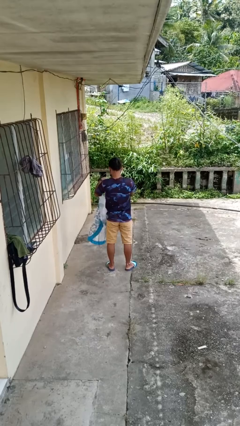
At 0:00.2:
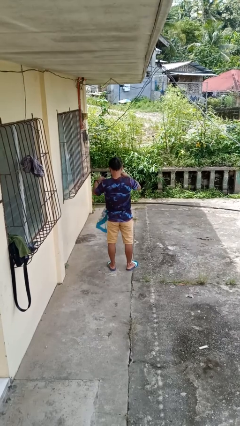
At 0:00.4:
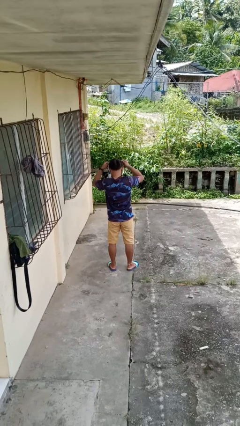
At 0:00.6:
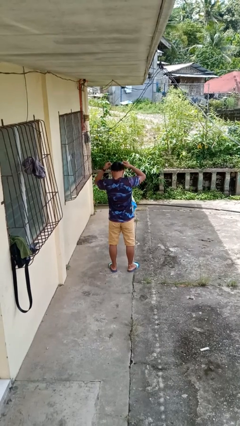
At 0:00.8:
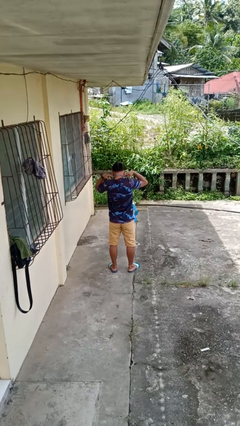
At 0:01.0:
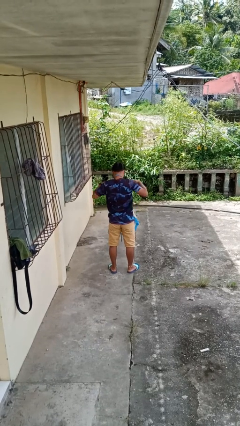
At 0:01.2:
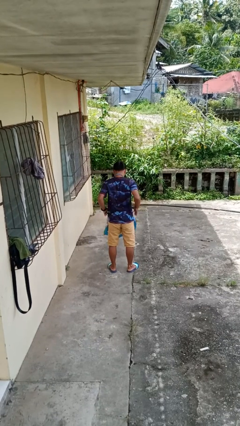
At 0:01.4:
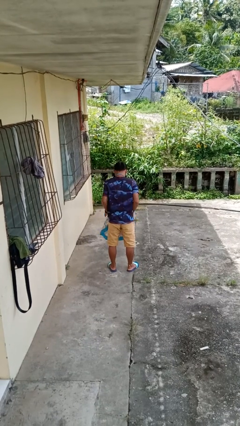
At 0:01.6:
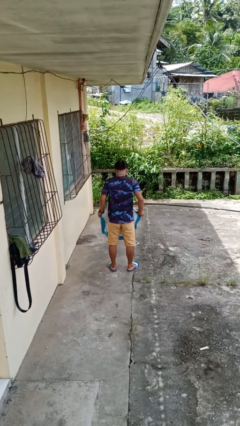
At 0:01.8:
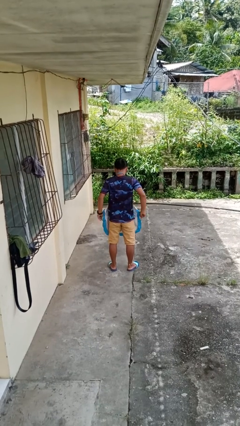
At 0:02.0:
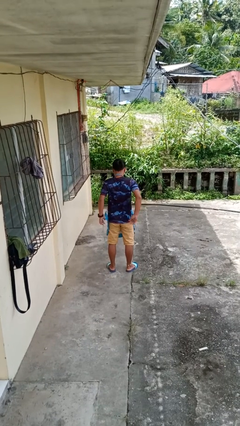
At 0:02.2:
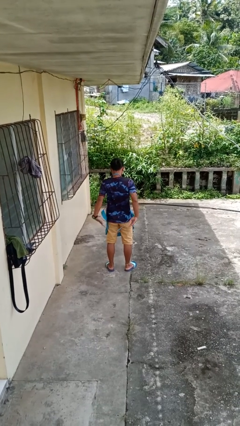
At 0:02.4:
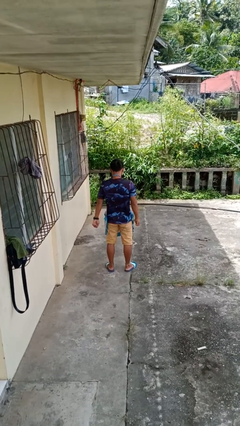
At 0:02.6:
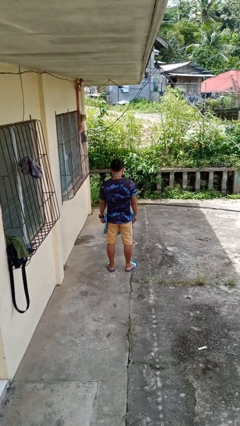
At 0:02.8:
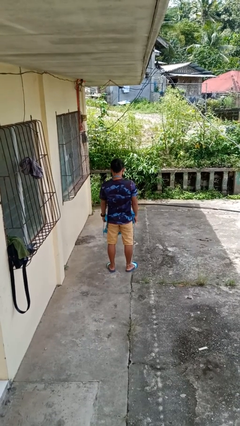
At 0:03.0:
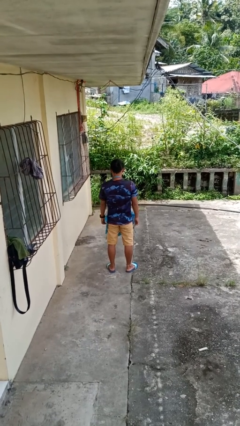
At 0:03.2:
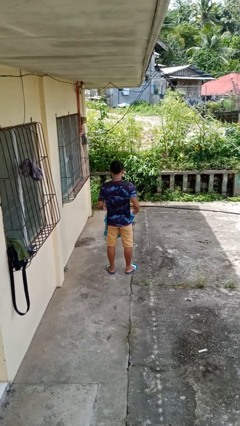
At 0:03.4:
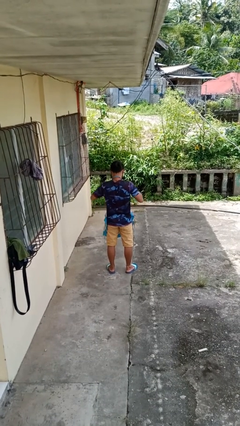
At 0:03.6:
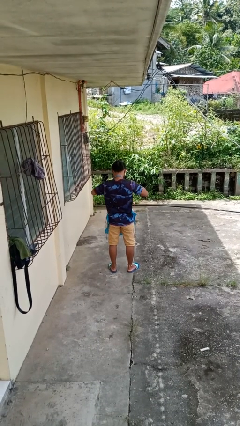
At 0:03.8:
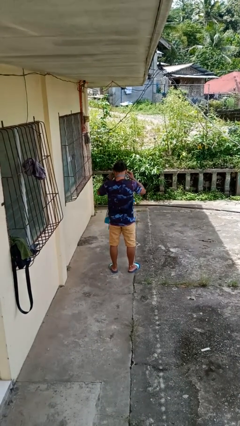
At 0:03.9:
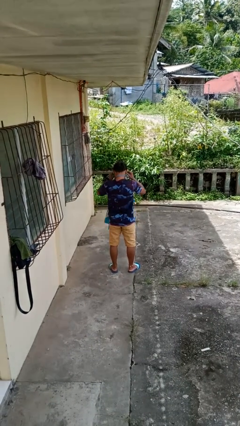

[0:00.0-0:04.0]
person puts on apron

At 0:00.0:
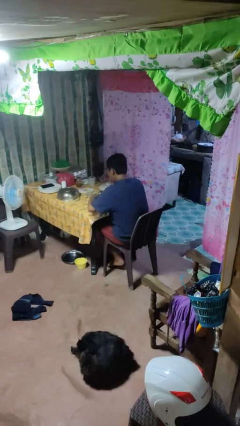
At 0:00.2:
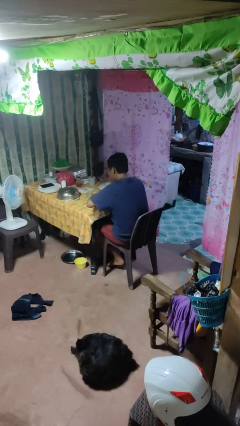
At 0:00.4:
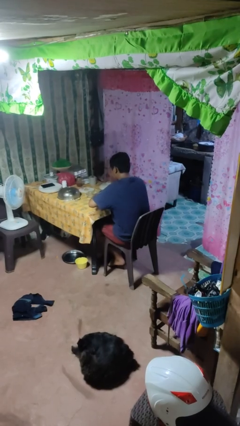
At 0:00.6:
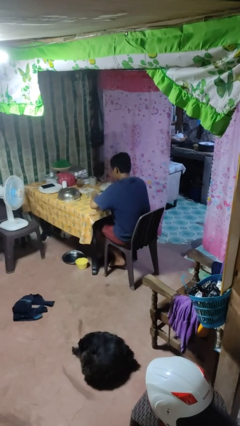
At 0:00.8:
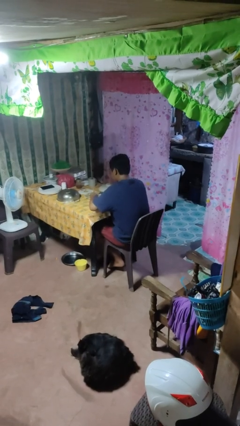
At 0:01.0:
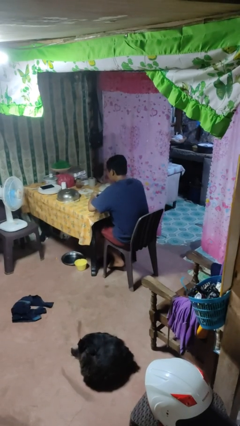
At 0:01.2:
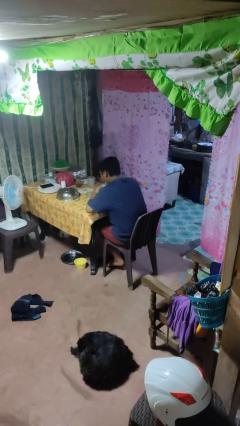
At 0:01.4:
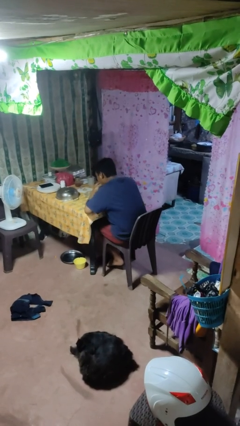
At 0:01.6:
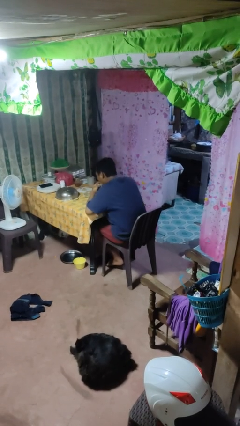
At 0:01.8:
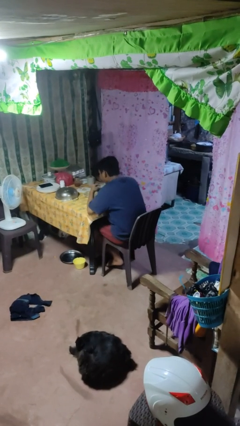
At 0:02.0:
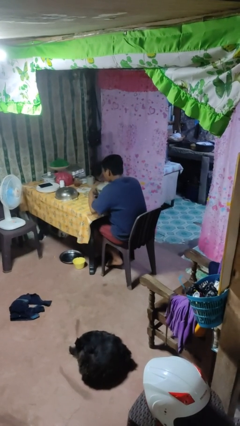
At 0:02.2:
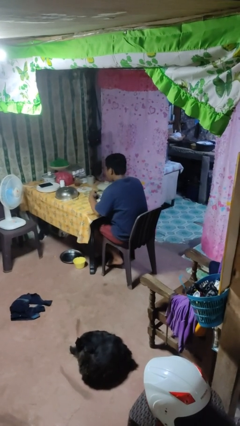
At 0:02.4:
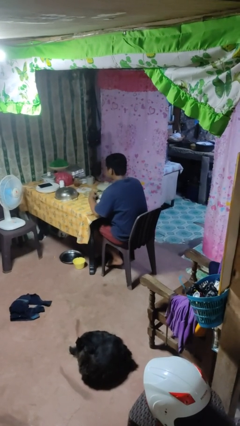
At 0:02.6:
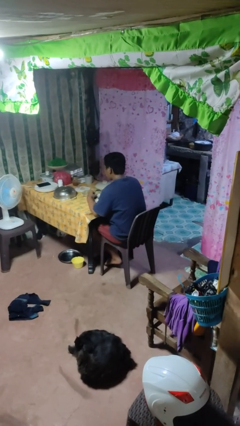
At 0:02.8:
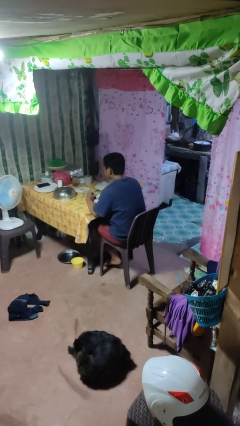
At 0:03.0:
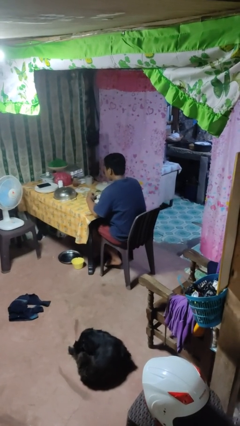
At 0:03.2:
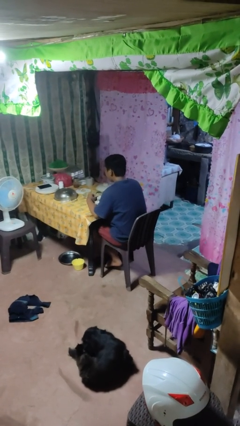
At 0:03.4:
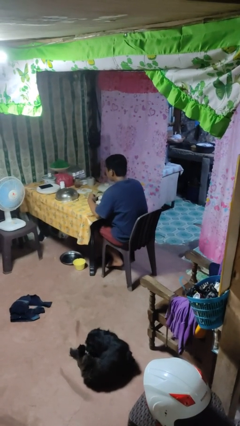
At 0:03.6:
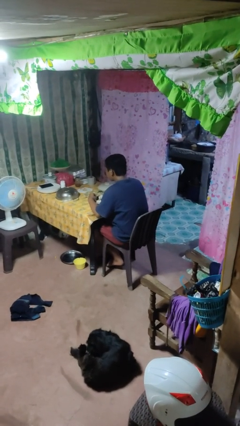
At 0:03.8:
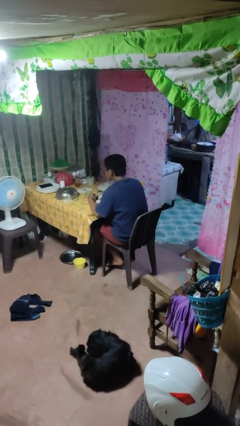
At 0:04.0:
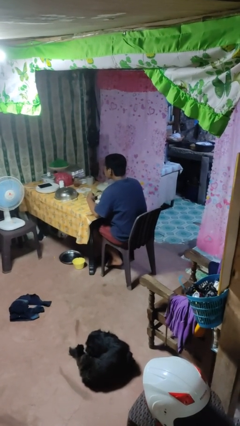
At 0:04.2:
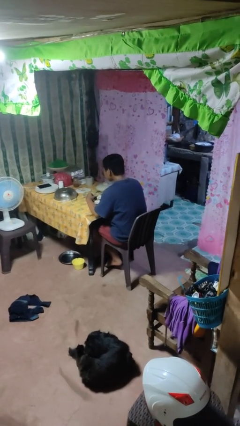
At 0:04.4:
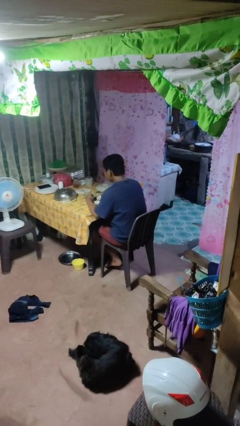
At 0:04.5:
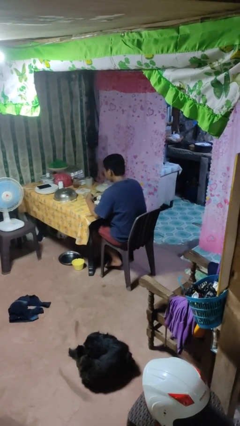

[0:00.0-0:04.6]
person eats with hands

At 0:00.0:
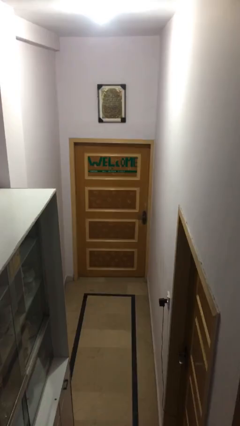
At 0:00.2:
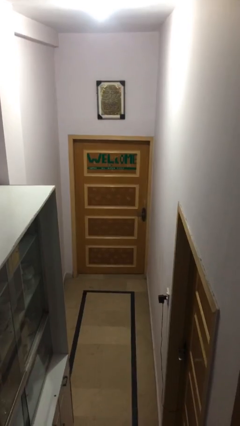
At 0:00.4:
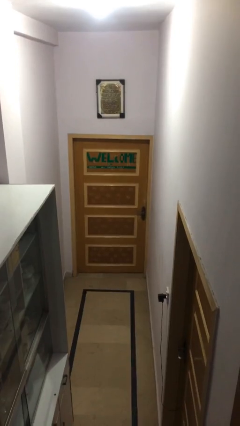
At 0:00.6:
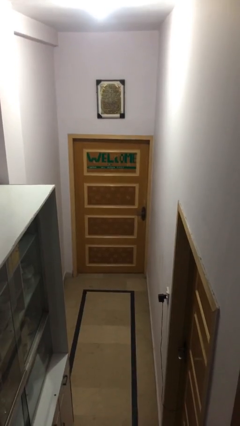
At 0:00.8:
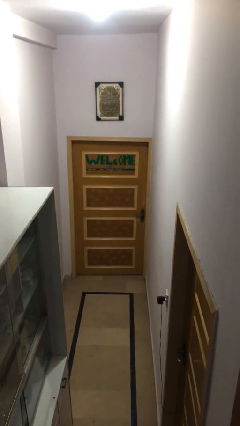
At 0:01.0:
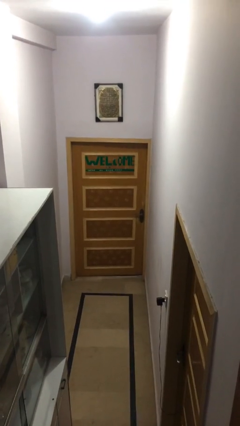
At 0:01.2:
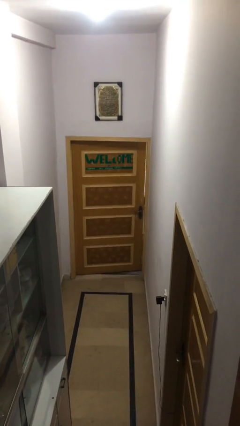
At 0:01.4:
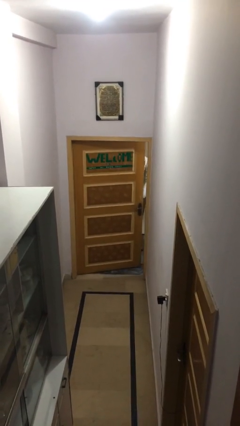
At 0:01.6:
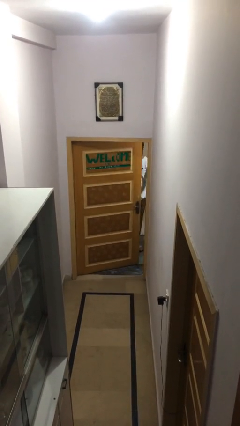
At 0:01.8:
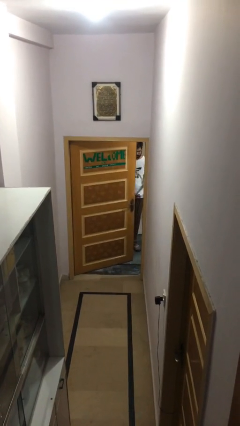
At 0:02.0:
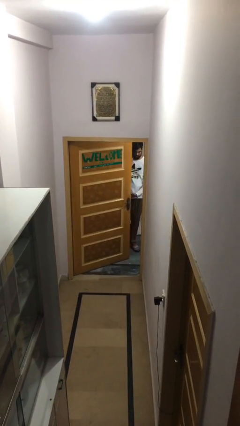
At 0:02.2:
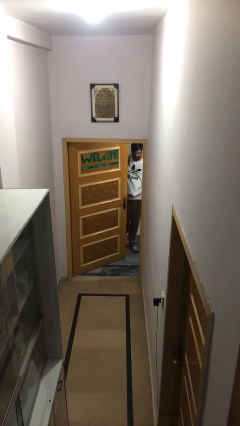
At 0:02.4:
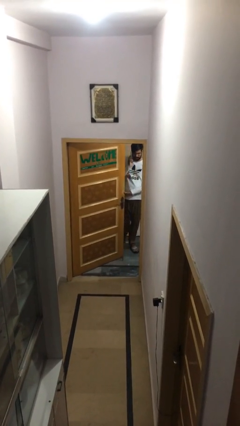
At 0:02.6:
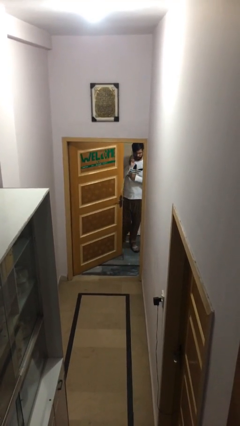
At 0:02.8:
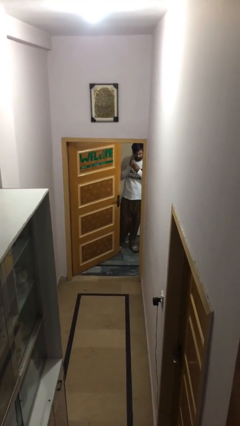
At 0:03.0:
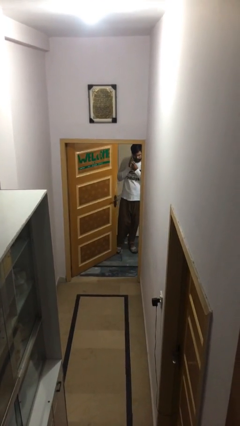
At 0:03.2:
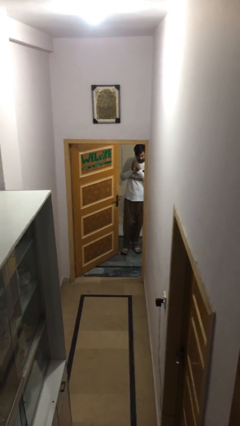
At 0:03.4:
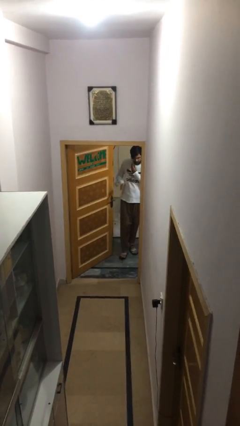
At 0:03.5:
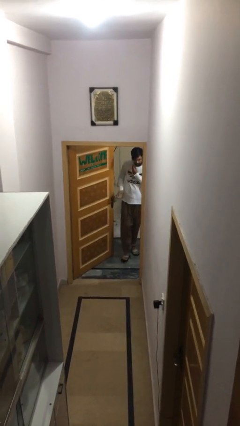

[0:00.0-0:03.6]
person opens facility door

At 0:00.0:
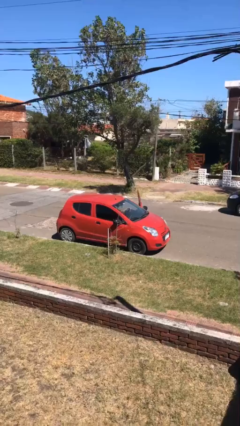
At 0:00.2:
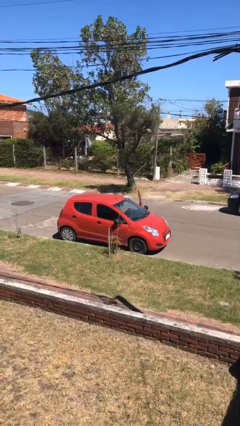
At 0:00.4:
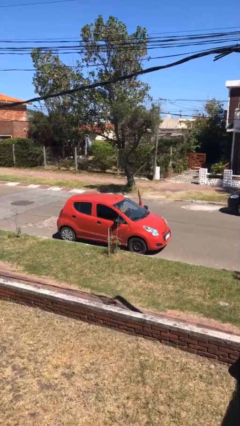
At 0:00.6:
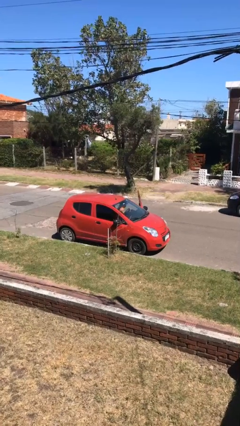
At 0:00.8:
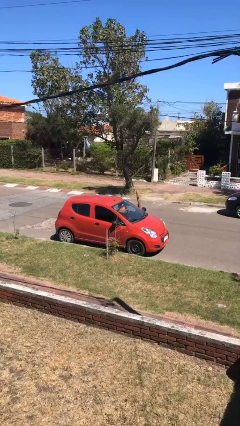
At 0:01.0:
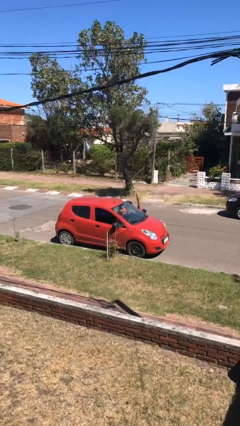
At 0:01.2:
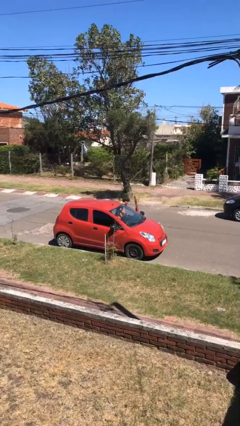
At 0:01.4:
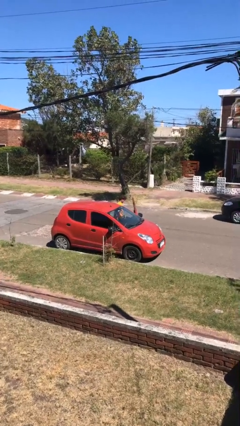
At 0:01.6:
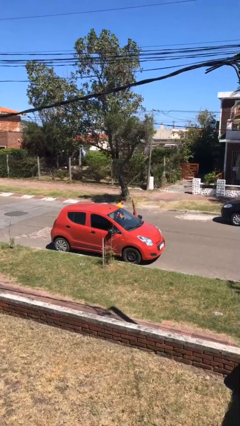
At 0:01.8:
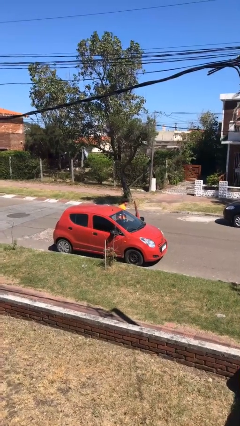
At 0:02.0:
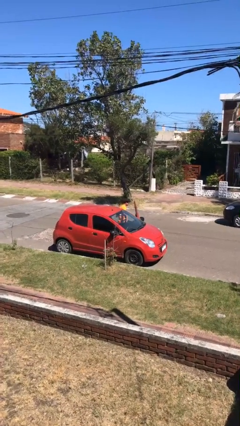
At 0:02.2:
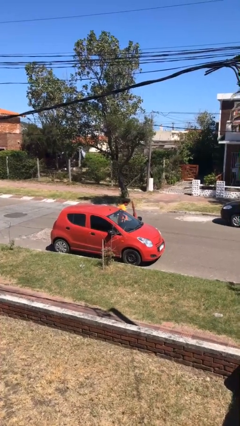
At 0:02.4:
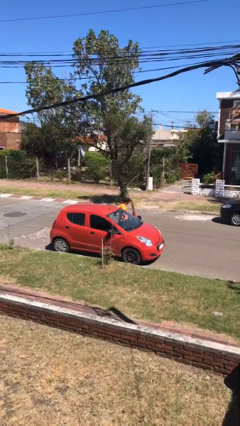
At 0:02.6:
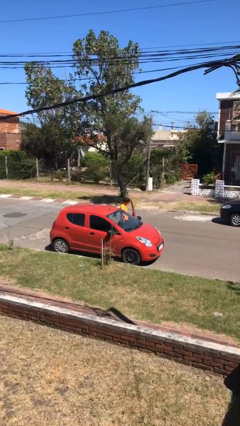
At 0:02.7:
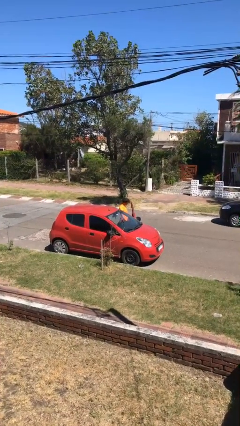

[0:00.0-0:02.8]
person exits car

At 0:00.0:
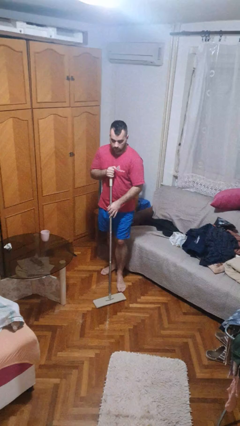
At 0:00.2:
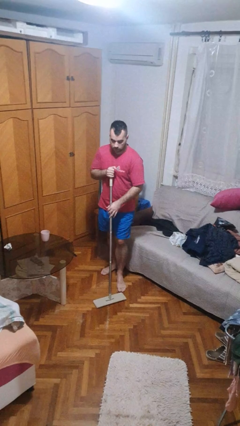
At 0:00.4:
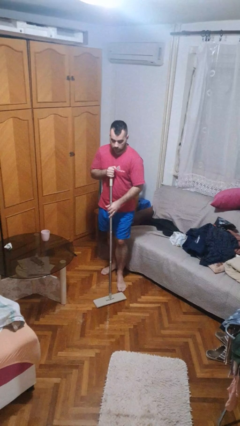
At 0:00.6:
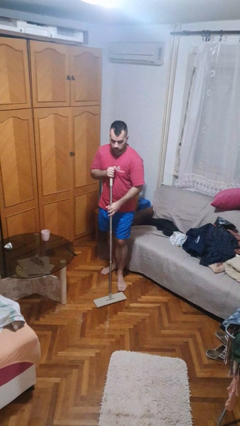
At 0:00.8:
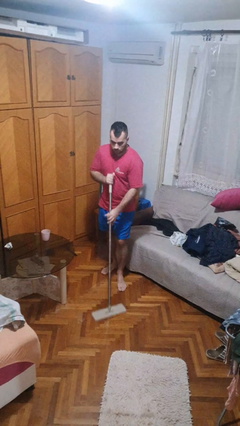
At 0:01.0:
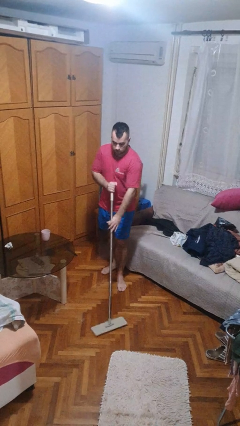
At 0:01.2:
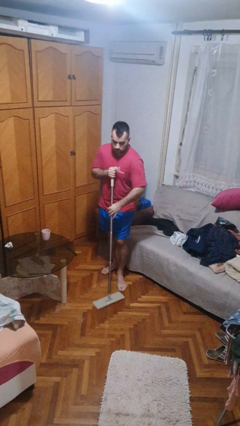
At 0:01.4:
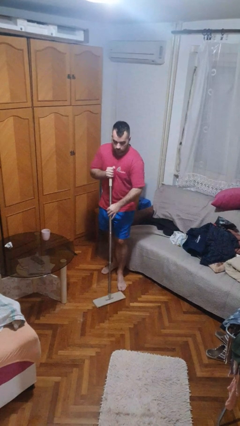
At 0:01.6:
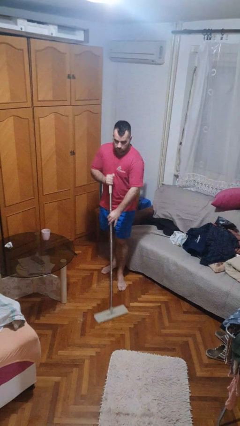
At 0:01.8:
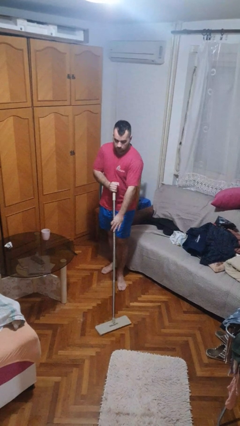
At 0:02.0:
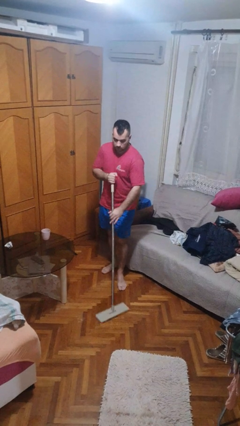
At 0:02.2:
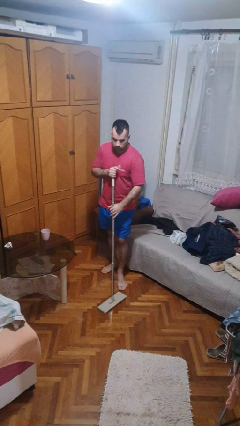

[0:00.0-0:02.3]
person mops

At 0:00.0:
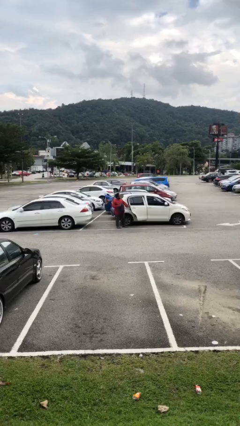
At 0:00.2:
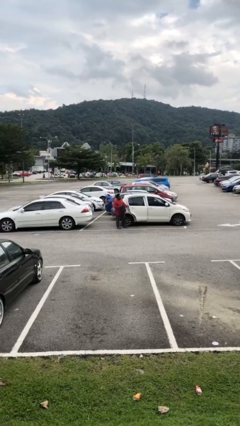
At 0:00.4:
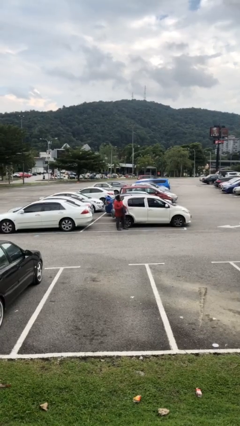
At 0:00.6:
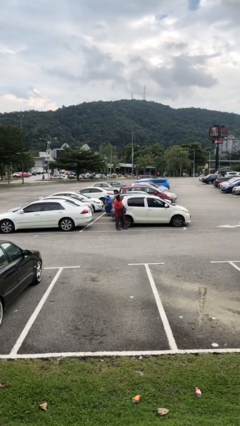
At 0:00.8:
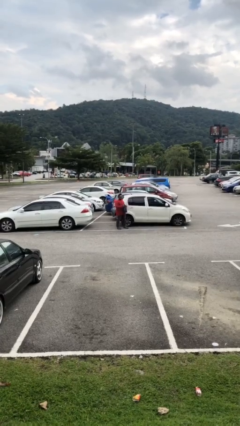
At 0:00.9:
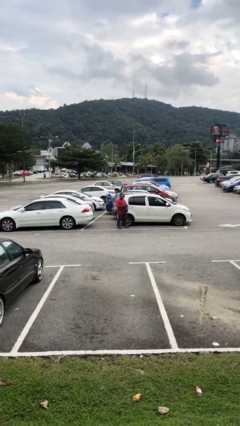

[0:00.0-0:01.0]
person closes car door
